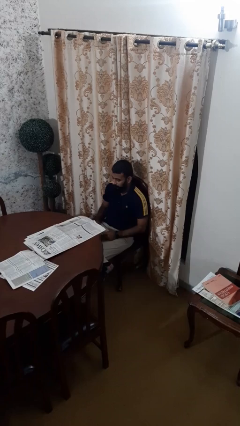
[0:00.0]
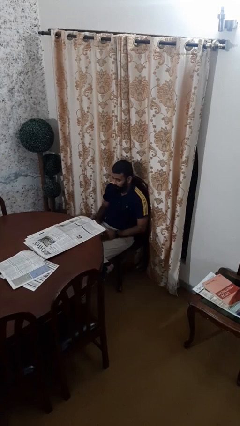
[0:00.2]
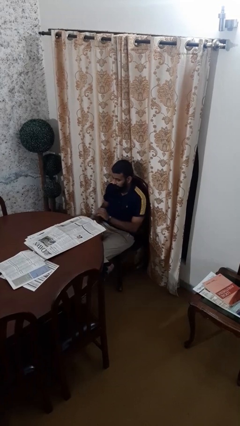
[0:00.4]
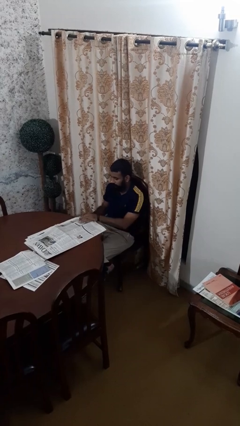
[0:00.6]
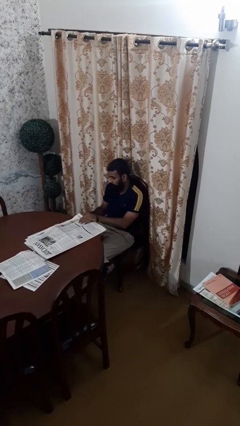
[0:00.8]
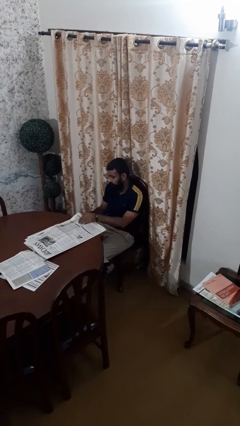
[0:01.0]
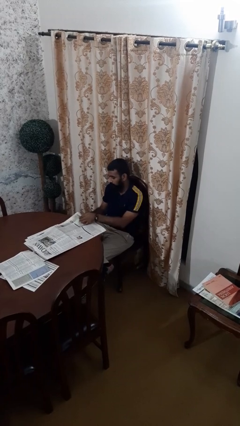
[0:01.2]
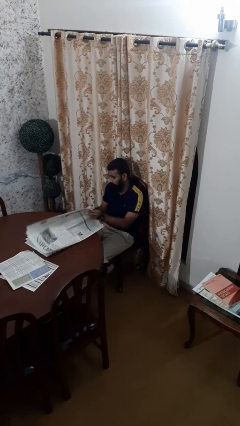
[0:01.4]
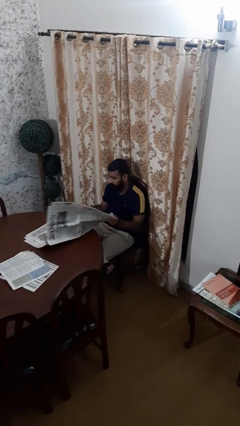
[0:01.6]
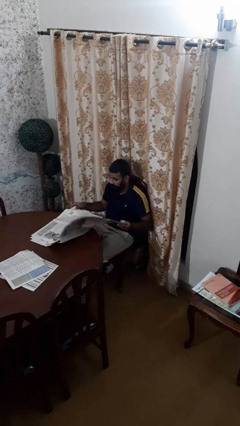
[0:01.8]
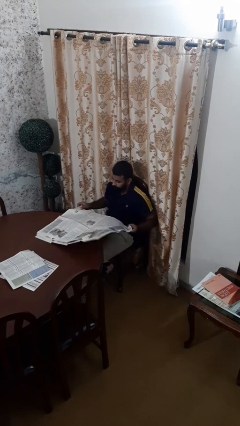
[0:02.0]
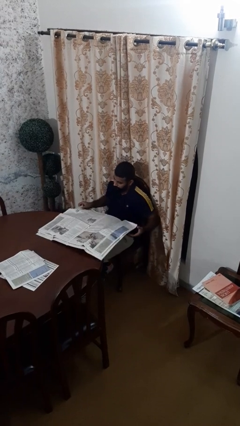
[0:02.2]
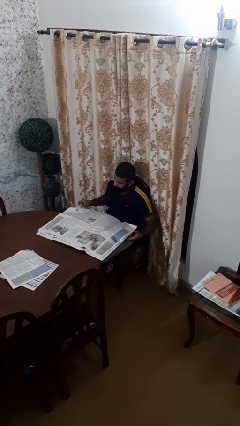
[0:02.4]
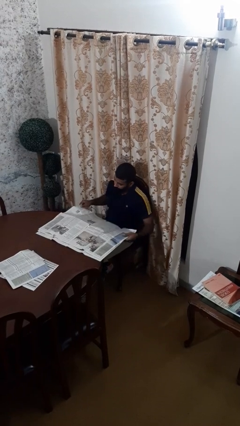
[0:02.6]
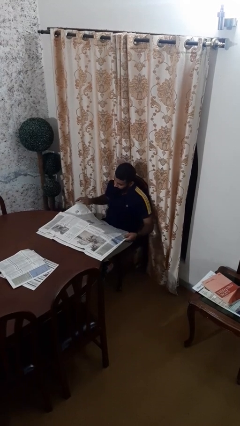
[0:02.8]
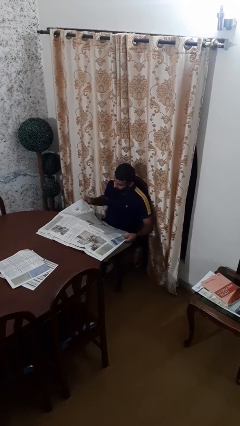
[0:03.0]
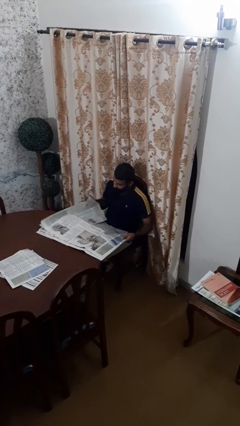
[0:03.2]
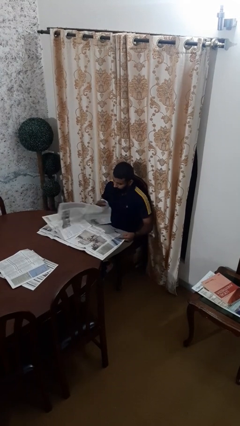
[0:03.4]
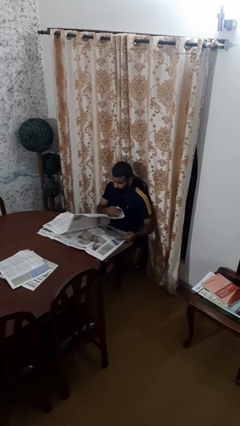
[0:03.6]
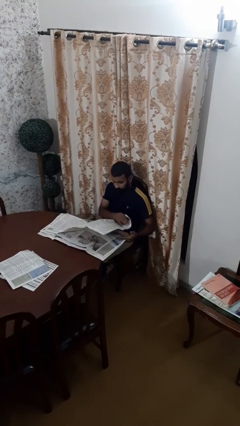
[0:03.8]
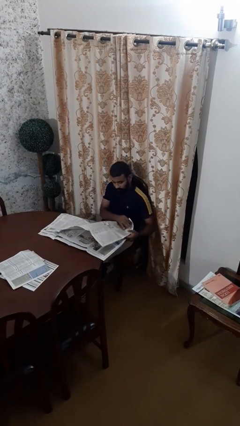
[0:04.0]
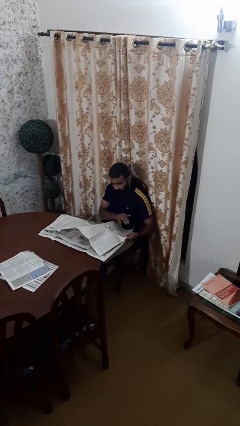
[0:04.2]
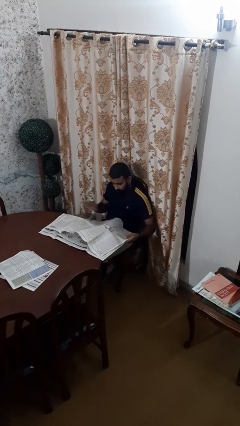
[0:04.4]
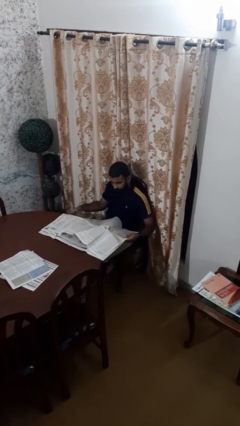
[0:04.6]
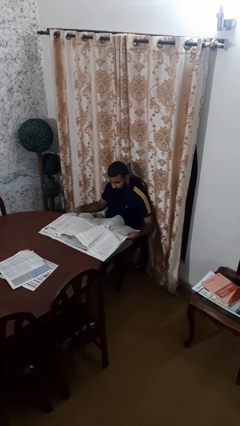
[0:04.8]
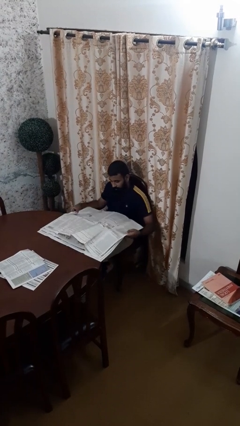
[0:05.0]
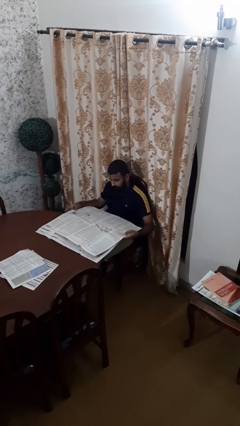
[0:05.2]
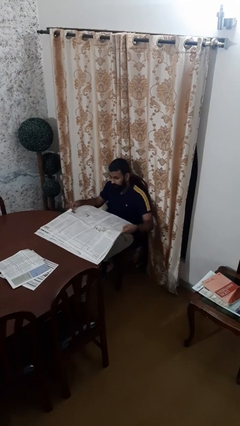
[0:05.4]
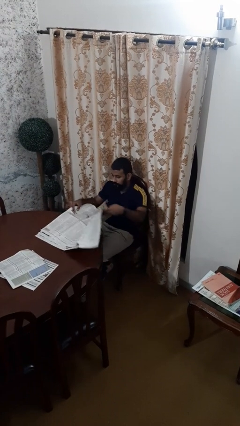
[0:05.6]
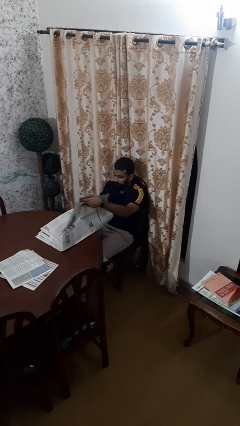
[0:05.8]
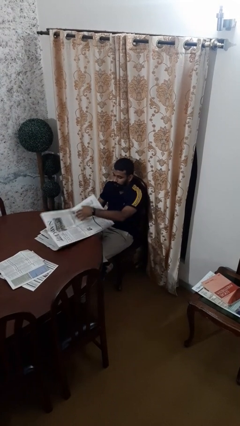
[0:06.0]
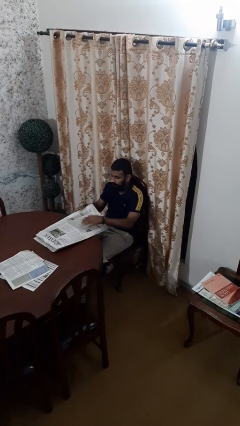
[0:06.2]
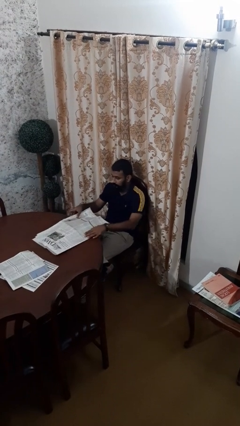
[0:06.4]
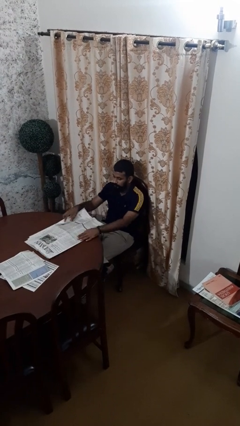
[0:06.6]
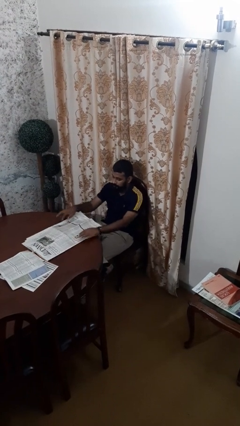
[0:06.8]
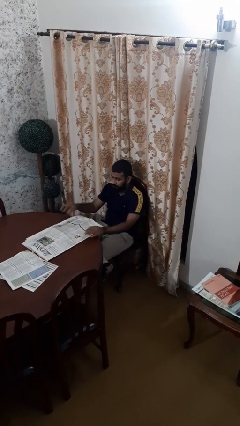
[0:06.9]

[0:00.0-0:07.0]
person reads newspaper

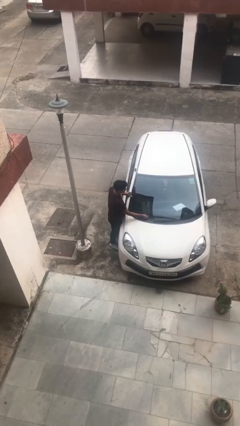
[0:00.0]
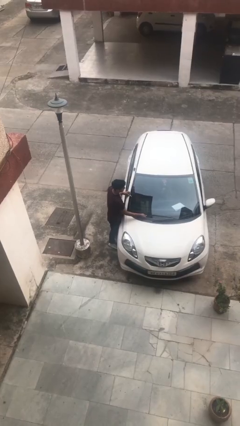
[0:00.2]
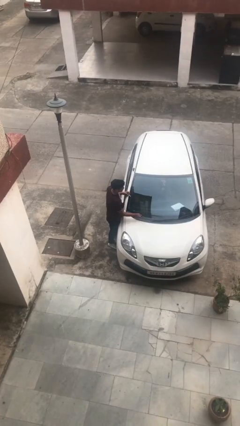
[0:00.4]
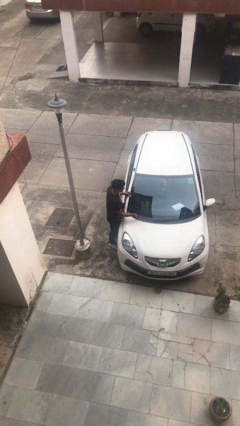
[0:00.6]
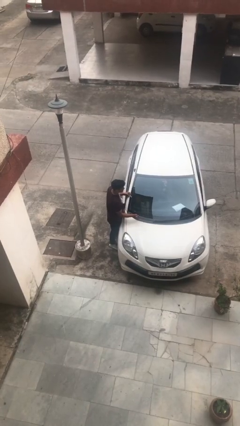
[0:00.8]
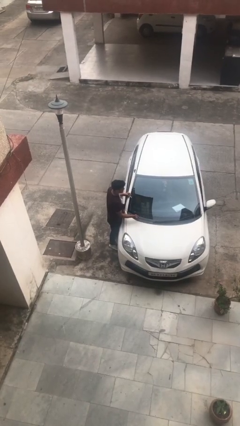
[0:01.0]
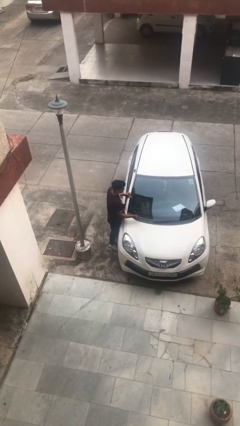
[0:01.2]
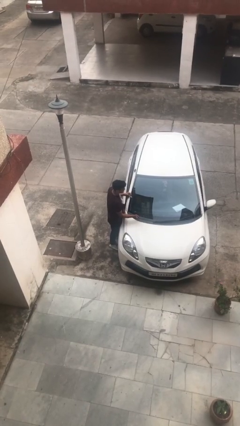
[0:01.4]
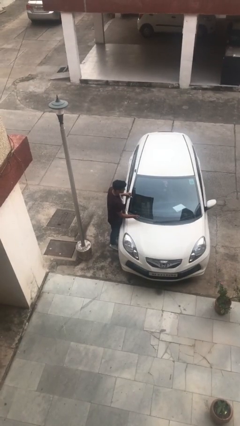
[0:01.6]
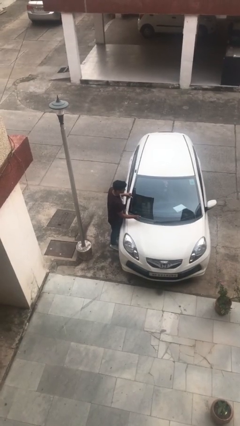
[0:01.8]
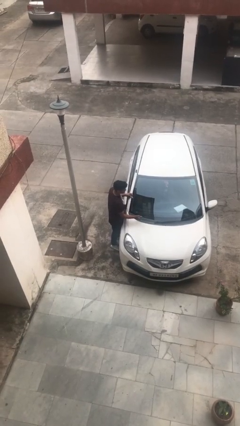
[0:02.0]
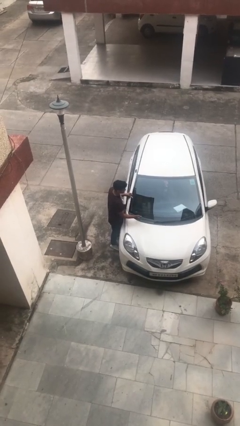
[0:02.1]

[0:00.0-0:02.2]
person flips up car wipers

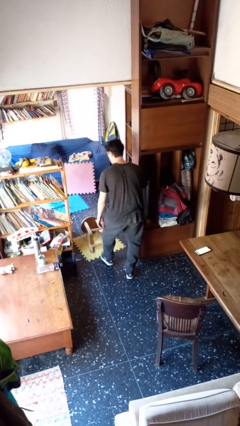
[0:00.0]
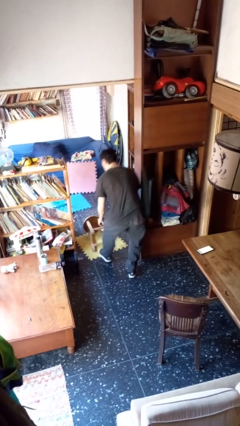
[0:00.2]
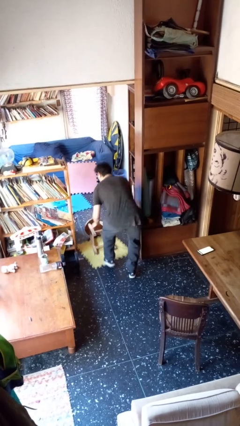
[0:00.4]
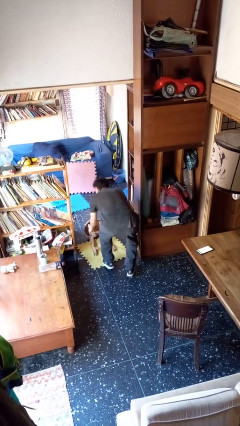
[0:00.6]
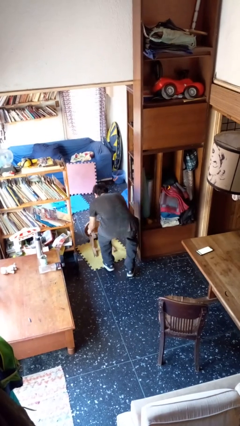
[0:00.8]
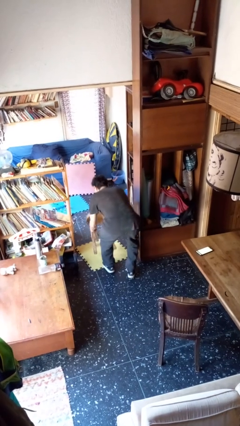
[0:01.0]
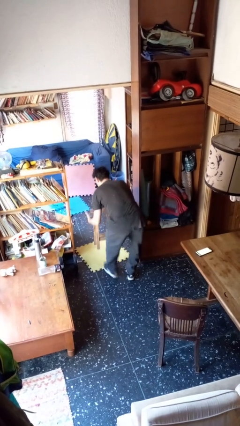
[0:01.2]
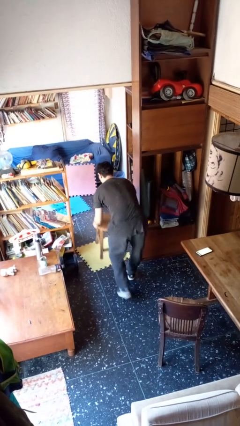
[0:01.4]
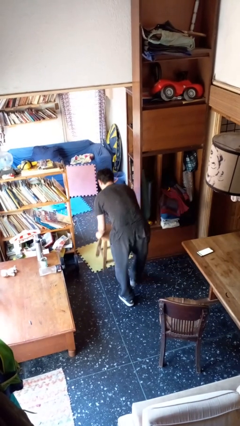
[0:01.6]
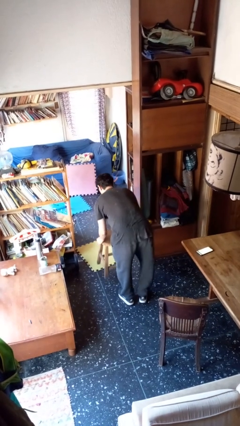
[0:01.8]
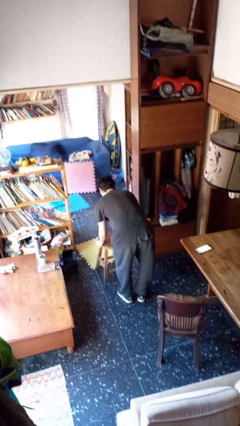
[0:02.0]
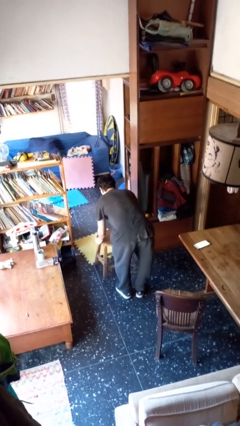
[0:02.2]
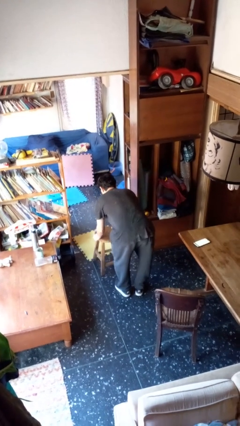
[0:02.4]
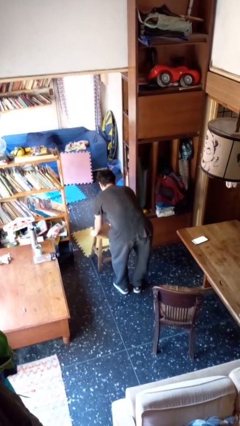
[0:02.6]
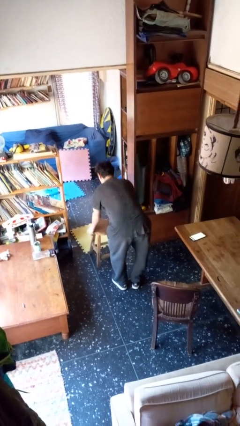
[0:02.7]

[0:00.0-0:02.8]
person sets upright furniture

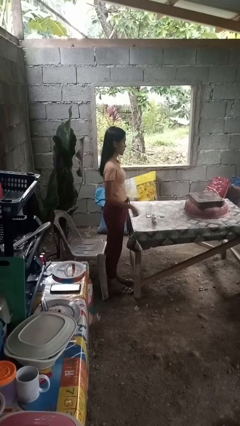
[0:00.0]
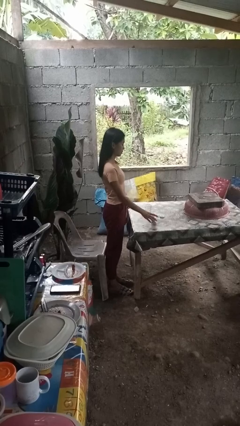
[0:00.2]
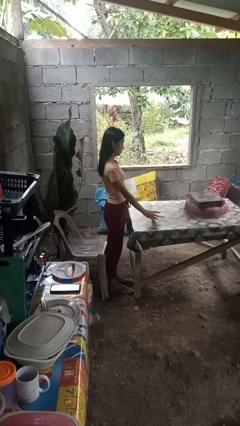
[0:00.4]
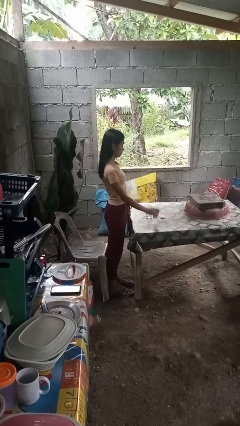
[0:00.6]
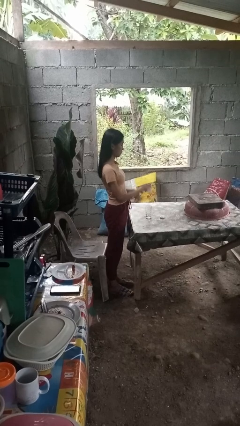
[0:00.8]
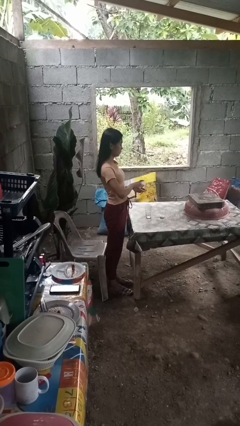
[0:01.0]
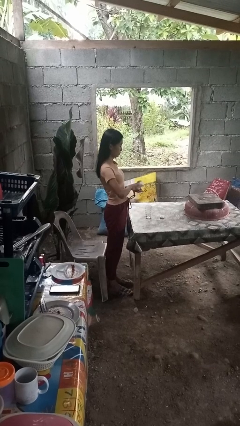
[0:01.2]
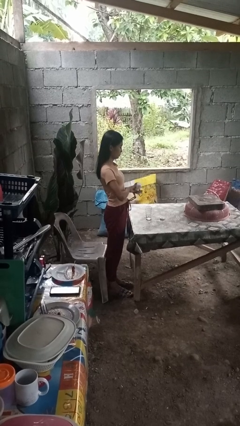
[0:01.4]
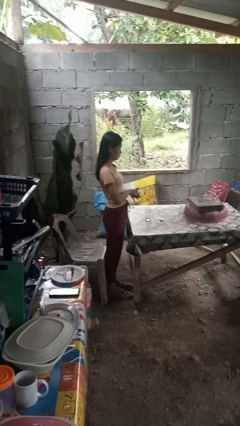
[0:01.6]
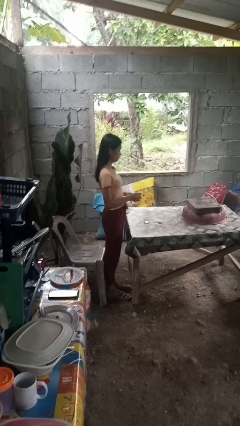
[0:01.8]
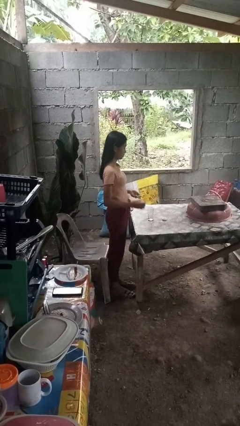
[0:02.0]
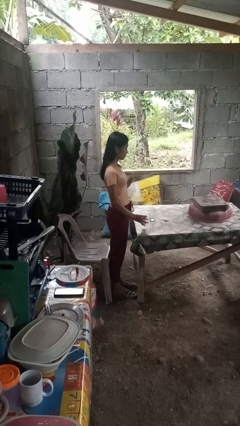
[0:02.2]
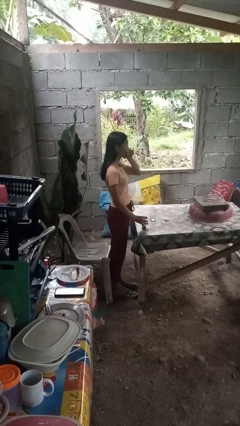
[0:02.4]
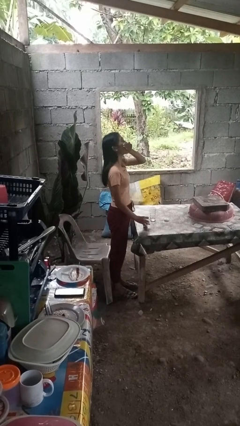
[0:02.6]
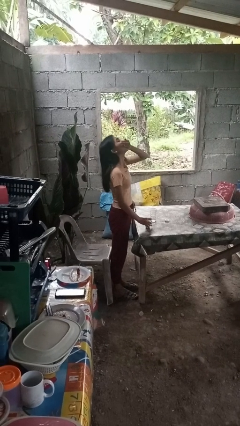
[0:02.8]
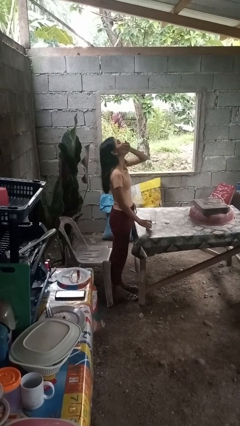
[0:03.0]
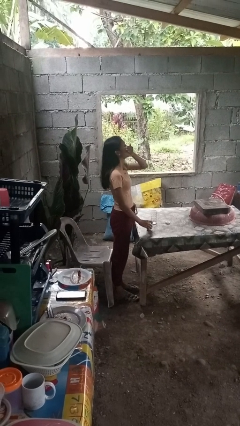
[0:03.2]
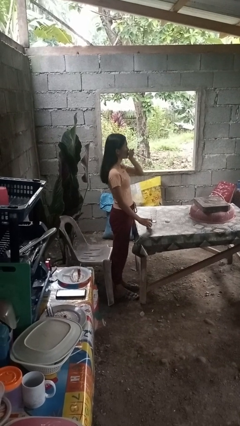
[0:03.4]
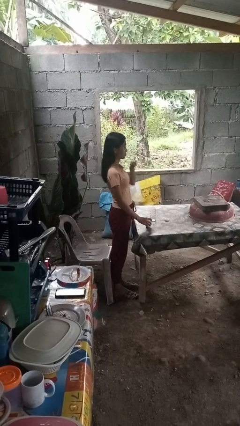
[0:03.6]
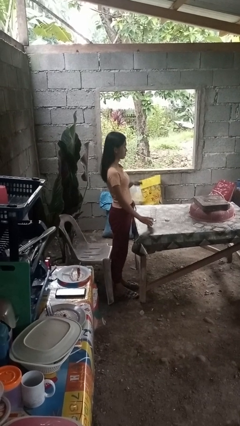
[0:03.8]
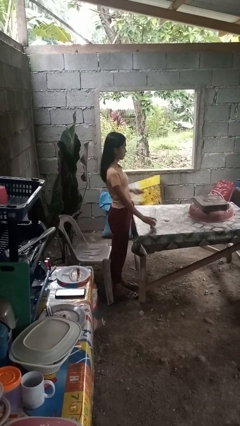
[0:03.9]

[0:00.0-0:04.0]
person takes medicine pills

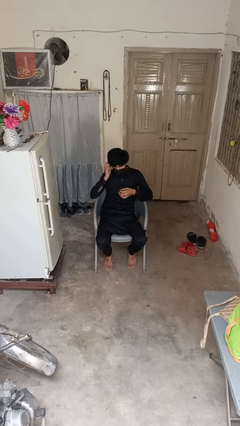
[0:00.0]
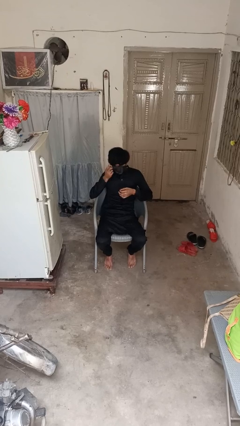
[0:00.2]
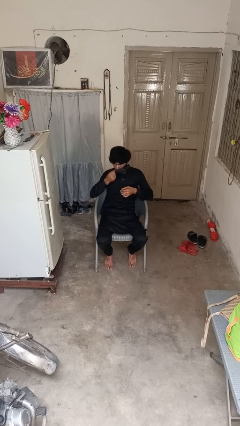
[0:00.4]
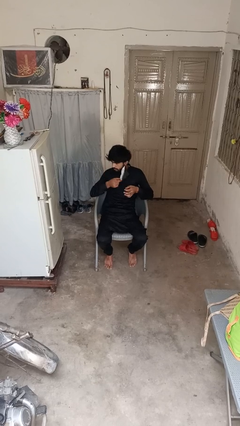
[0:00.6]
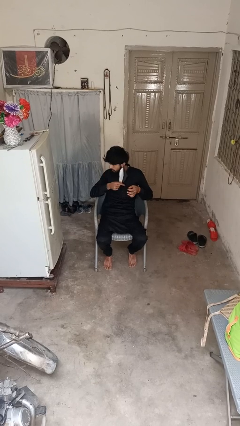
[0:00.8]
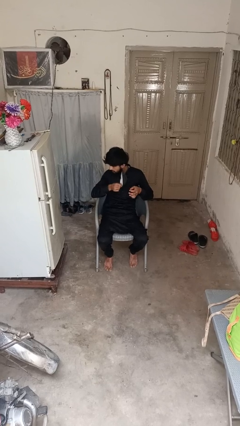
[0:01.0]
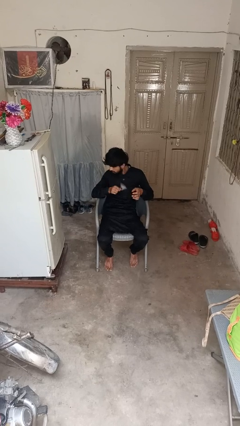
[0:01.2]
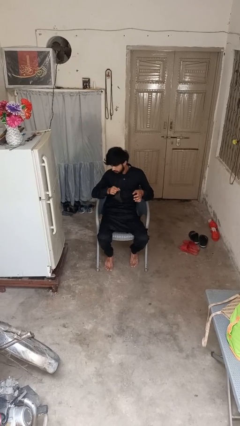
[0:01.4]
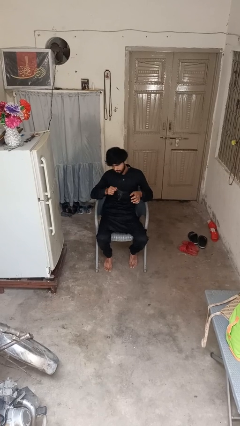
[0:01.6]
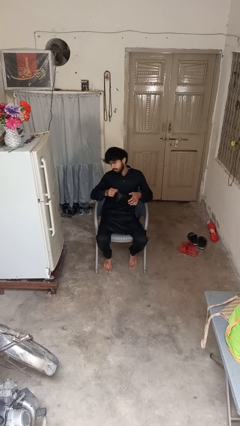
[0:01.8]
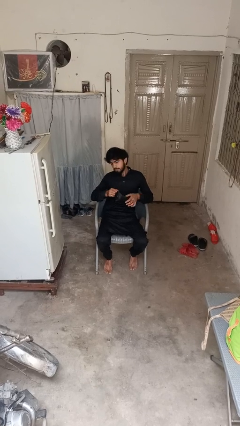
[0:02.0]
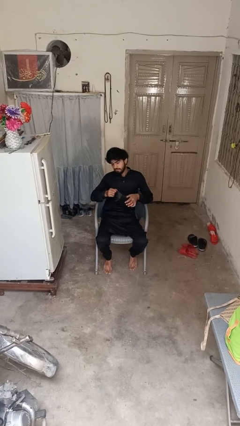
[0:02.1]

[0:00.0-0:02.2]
person takes off facemask
